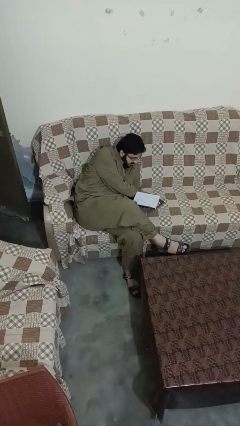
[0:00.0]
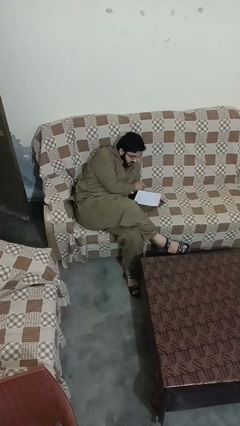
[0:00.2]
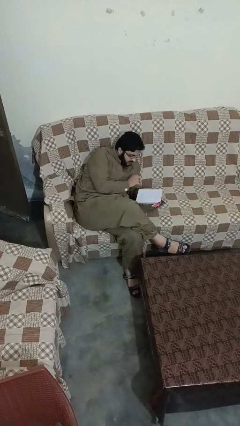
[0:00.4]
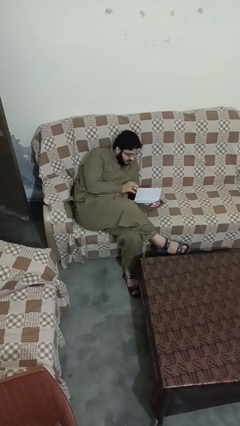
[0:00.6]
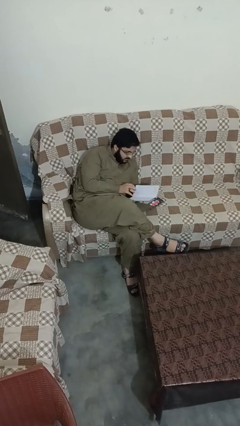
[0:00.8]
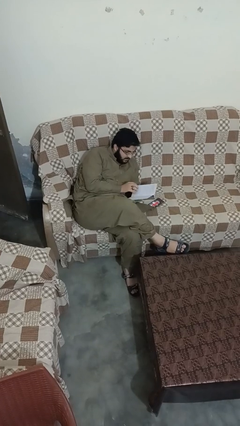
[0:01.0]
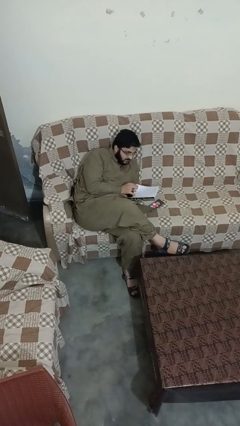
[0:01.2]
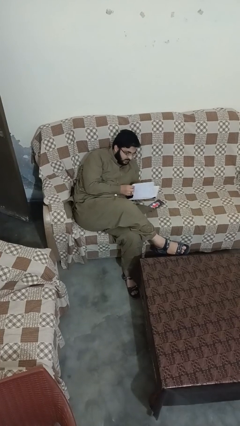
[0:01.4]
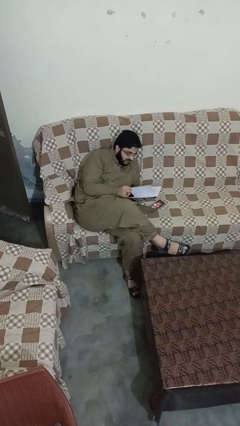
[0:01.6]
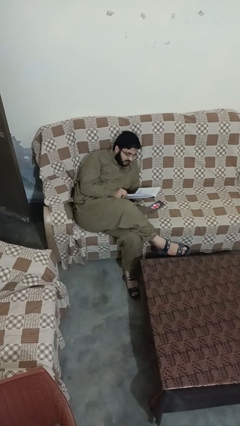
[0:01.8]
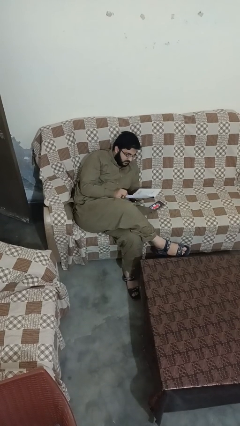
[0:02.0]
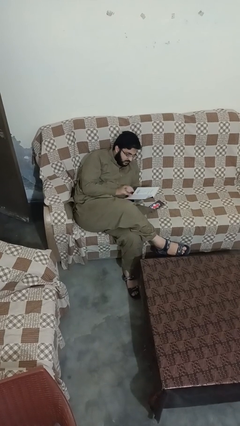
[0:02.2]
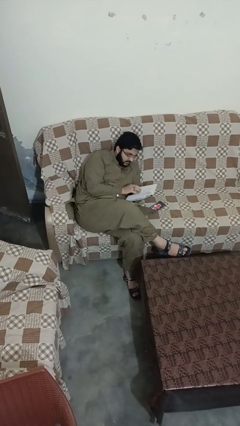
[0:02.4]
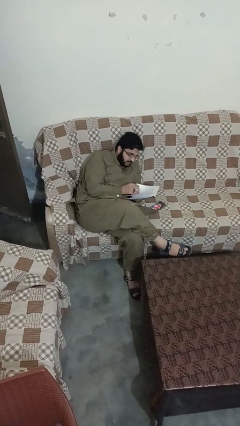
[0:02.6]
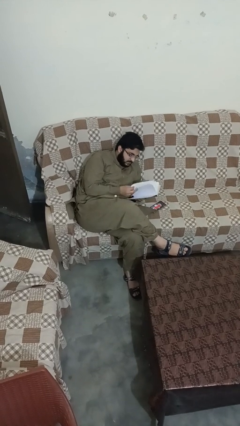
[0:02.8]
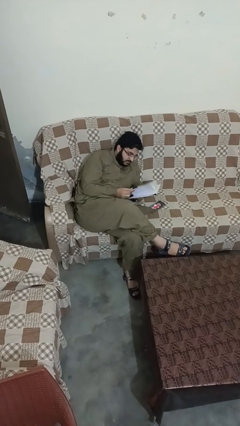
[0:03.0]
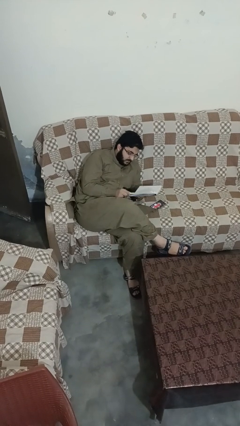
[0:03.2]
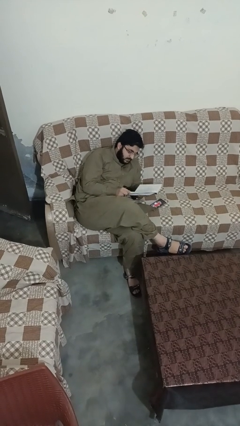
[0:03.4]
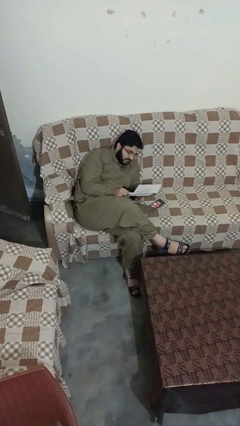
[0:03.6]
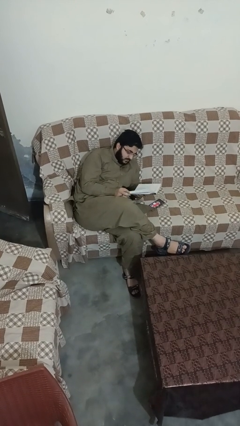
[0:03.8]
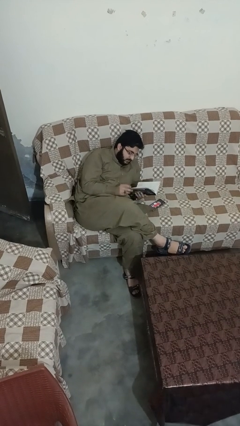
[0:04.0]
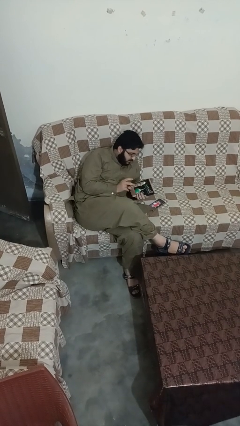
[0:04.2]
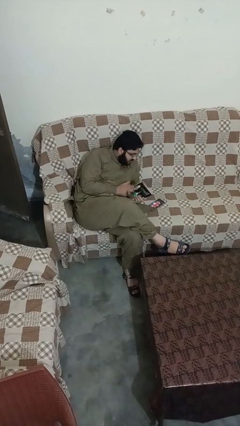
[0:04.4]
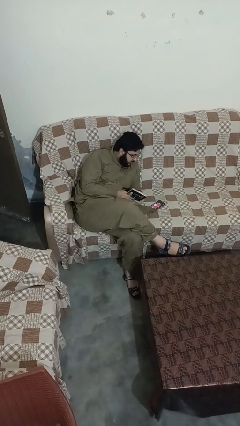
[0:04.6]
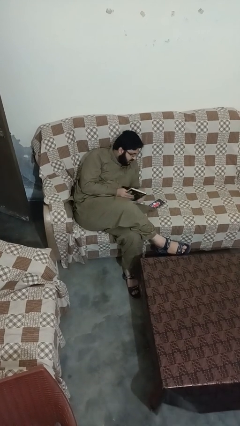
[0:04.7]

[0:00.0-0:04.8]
person reads book

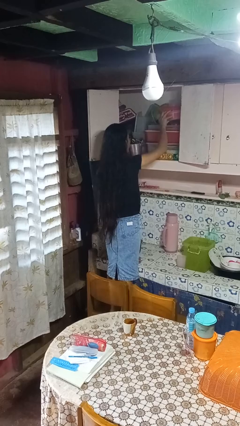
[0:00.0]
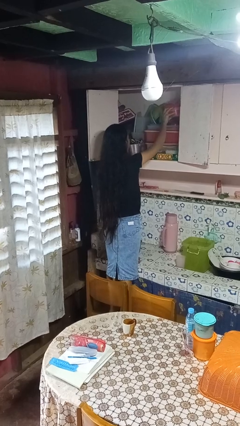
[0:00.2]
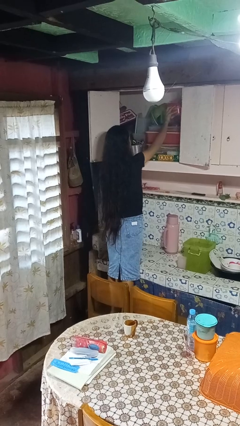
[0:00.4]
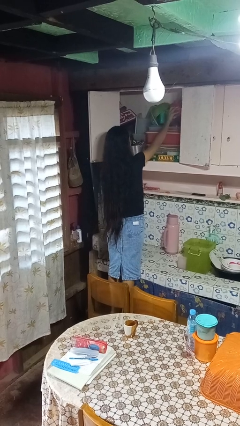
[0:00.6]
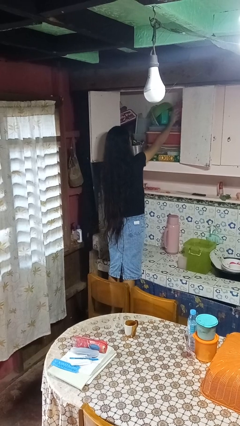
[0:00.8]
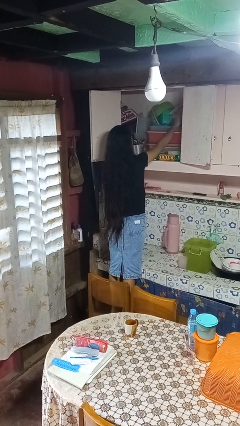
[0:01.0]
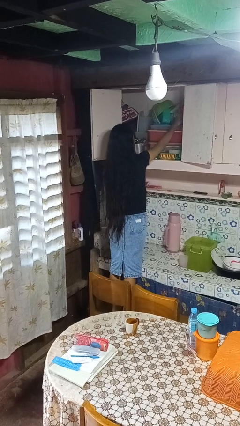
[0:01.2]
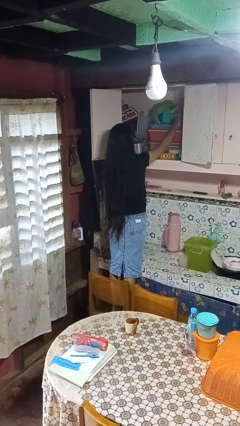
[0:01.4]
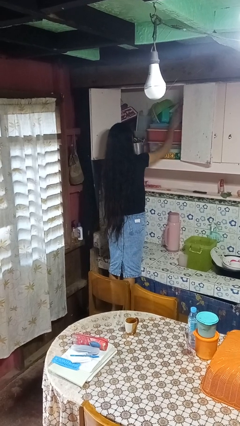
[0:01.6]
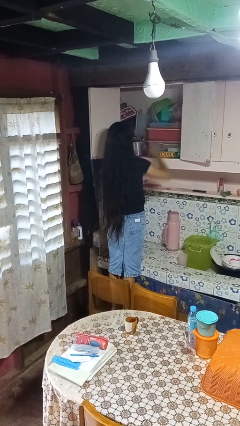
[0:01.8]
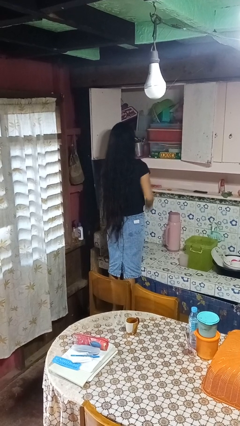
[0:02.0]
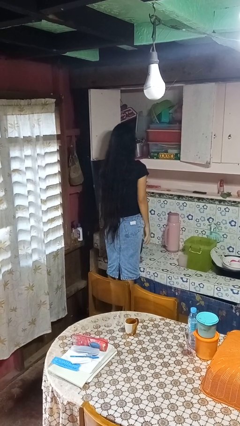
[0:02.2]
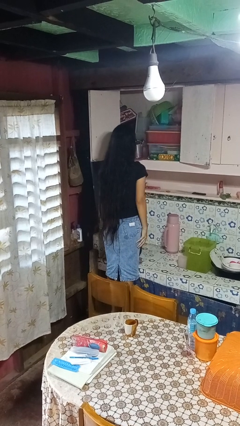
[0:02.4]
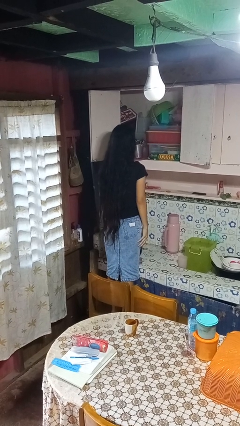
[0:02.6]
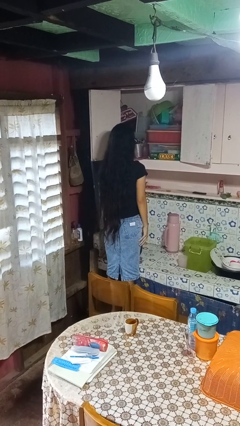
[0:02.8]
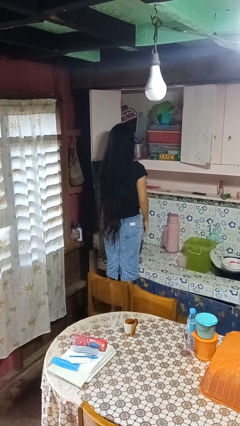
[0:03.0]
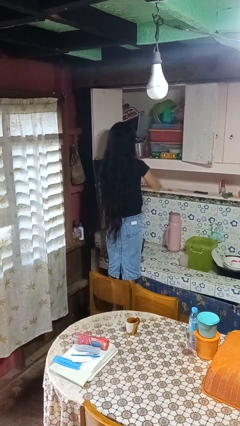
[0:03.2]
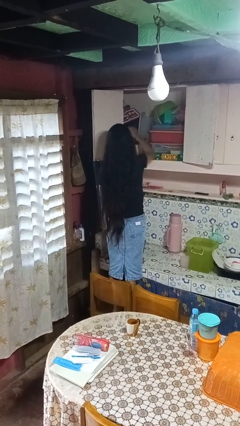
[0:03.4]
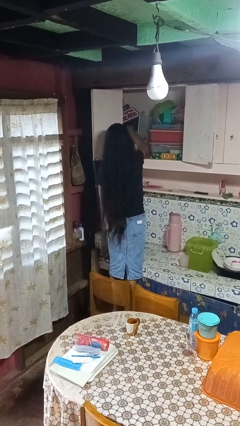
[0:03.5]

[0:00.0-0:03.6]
person puts object in cabinet

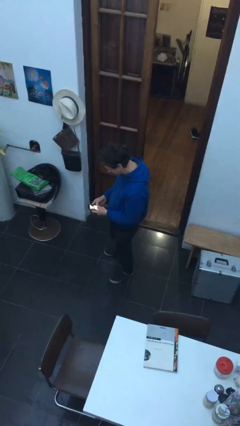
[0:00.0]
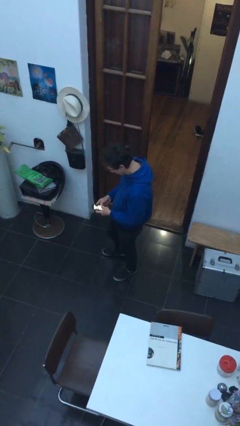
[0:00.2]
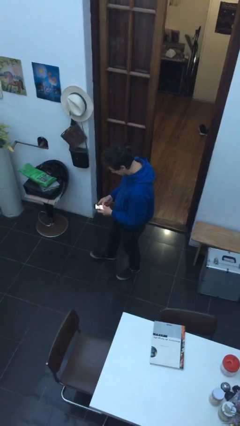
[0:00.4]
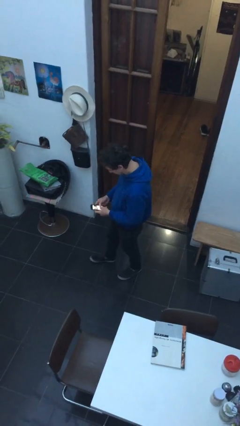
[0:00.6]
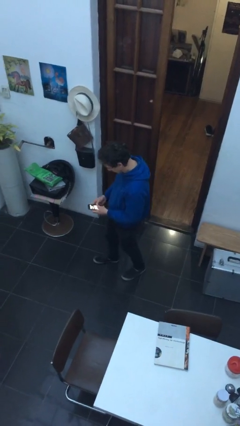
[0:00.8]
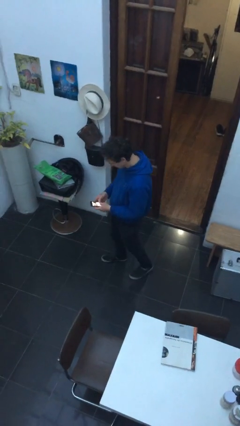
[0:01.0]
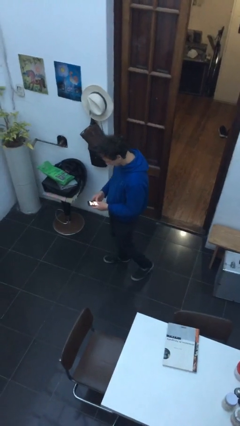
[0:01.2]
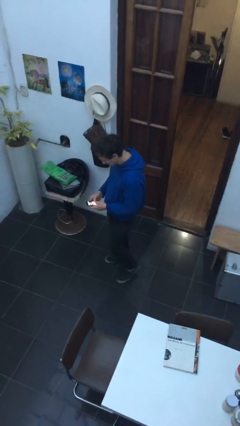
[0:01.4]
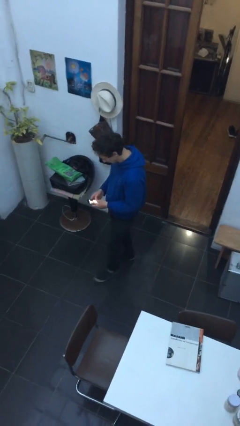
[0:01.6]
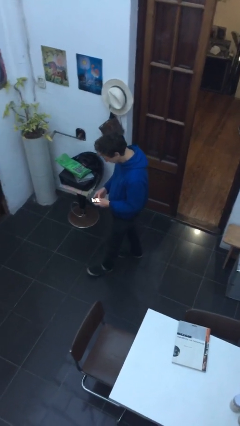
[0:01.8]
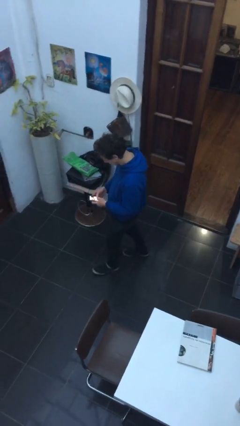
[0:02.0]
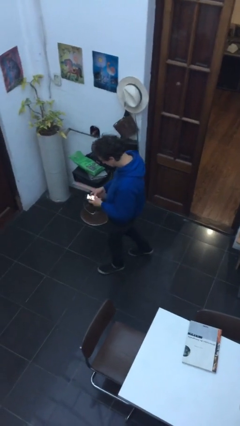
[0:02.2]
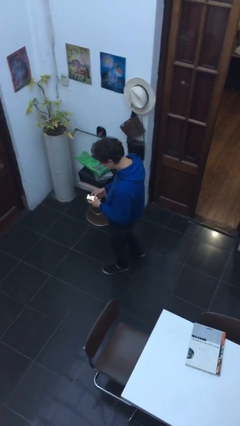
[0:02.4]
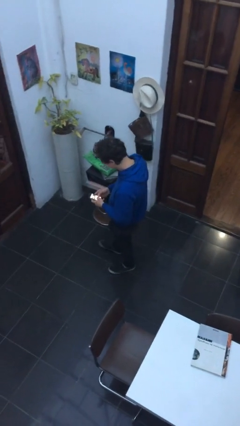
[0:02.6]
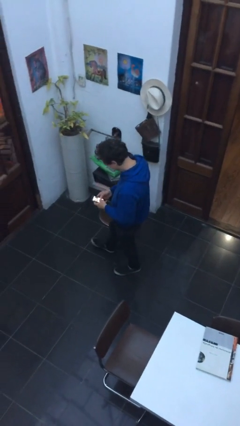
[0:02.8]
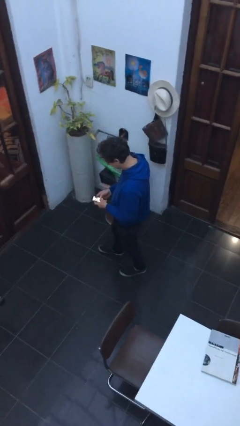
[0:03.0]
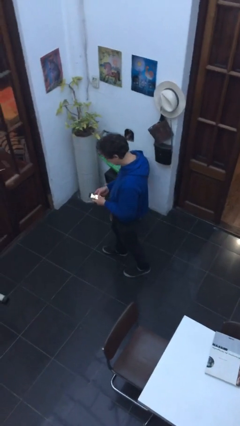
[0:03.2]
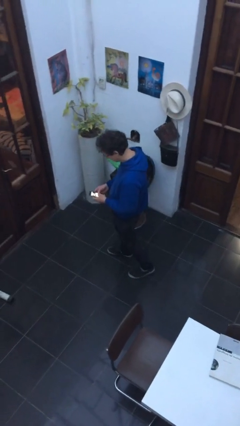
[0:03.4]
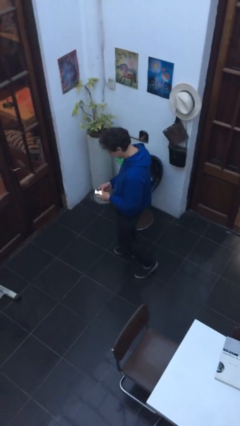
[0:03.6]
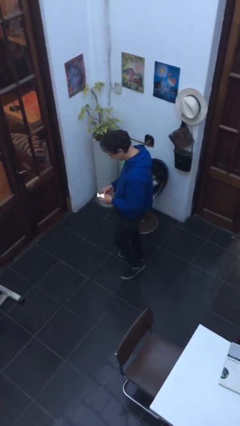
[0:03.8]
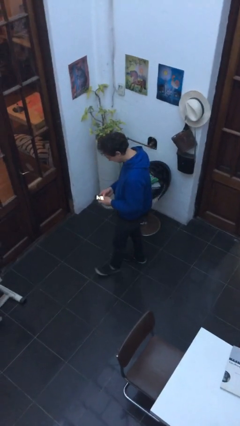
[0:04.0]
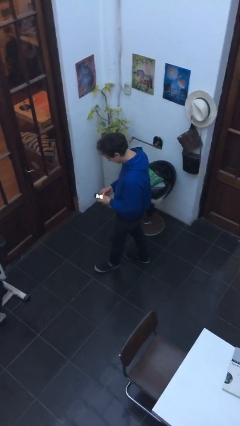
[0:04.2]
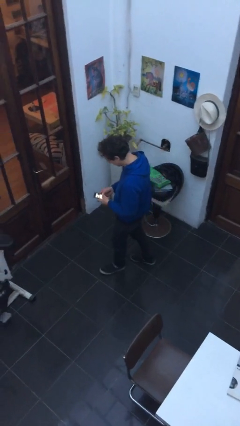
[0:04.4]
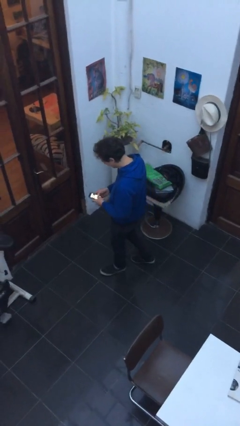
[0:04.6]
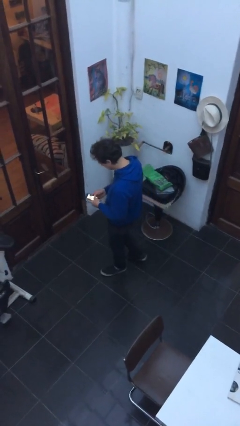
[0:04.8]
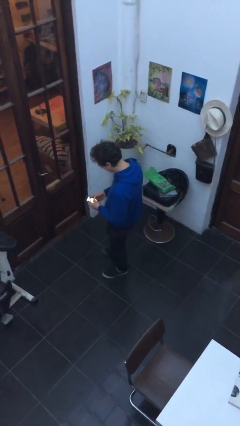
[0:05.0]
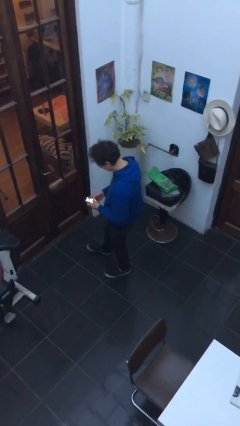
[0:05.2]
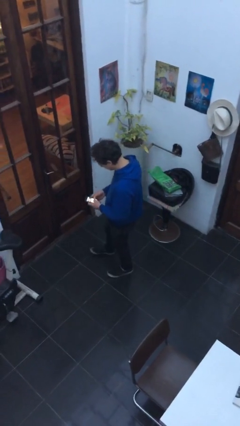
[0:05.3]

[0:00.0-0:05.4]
person texts on phone

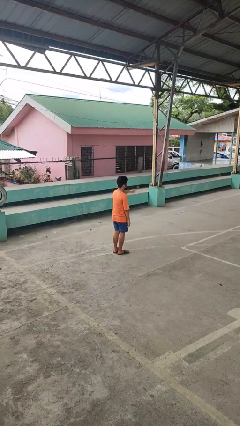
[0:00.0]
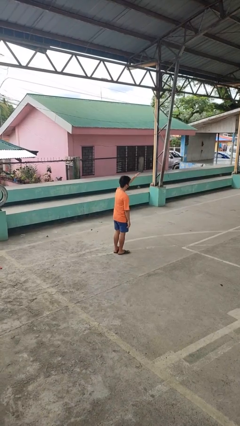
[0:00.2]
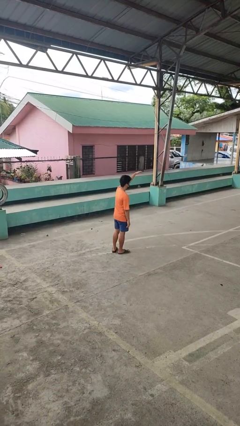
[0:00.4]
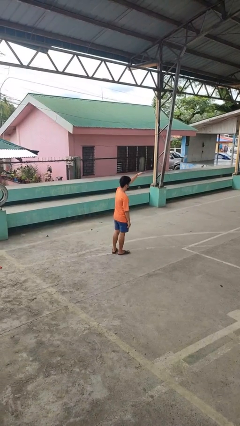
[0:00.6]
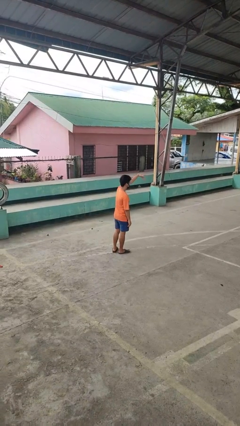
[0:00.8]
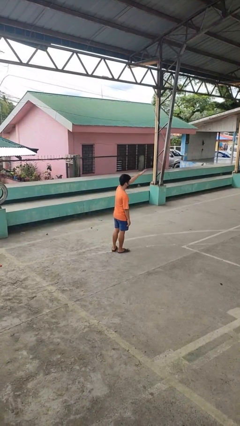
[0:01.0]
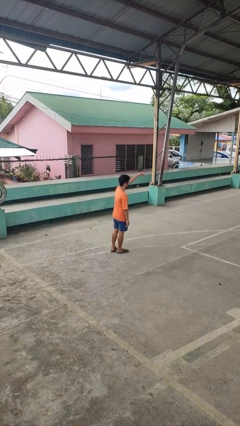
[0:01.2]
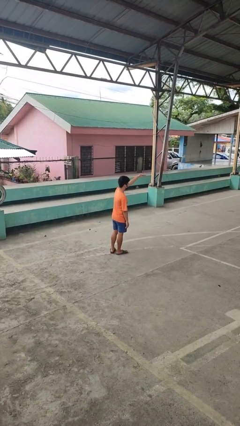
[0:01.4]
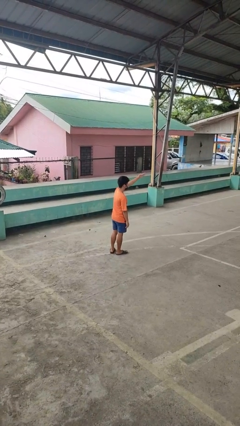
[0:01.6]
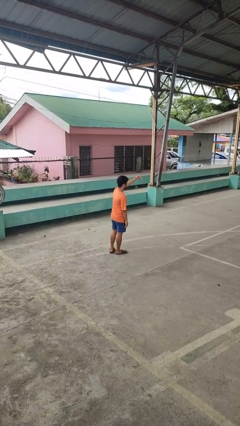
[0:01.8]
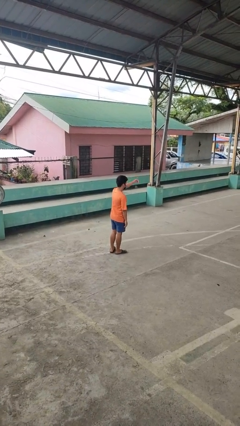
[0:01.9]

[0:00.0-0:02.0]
person gestures come here

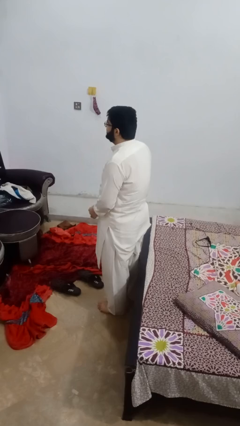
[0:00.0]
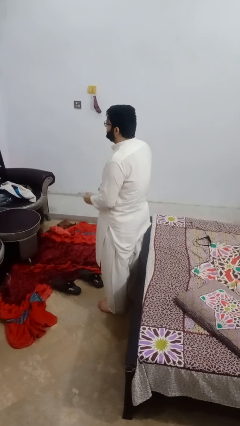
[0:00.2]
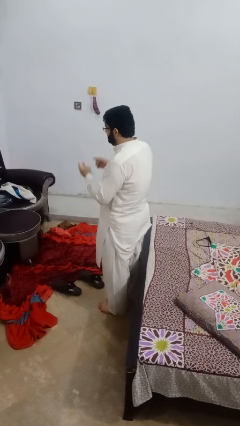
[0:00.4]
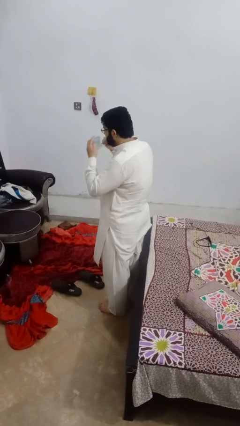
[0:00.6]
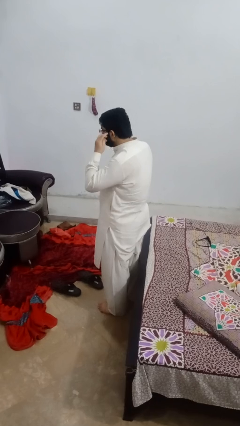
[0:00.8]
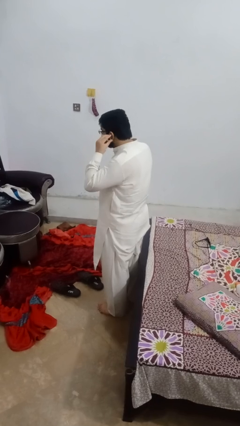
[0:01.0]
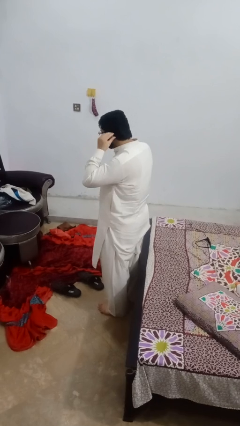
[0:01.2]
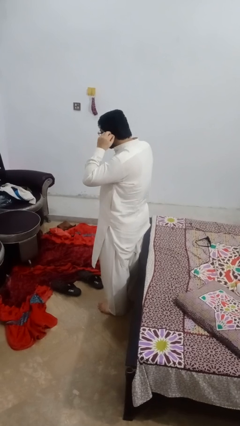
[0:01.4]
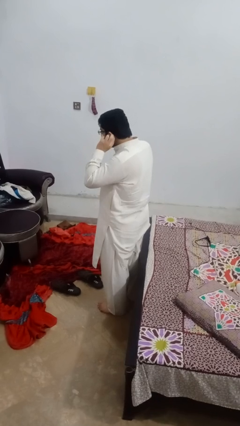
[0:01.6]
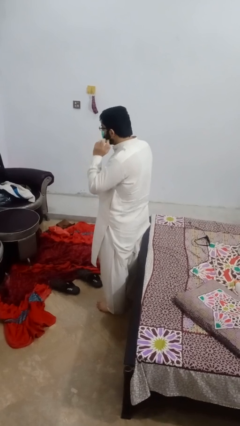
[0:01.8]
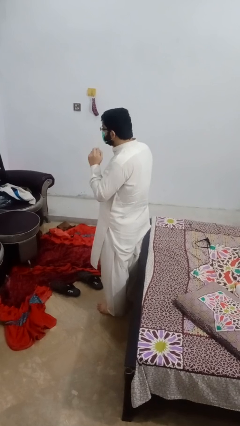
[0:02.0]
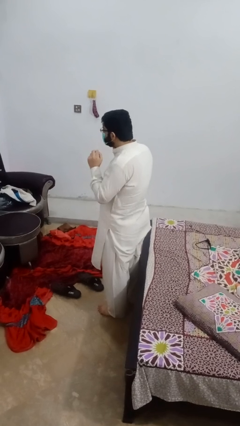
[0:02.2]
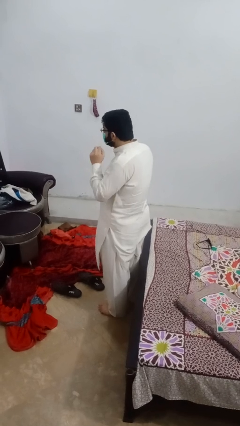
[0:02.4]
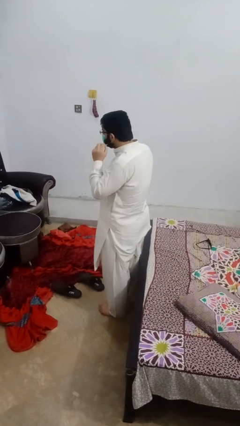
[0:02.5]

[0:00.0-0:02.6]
person puts on facemask
